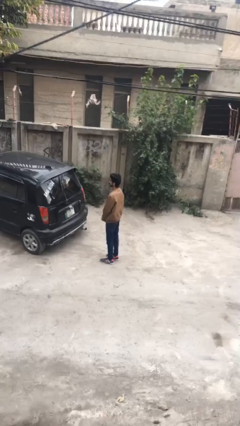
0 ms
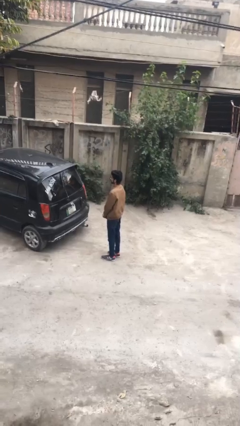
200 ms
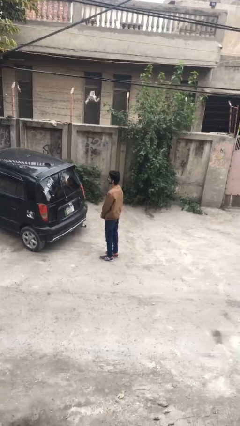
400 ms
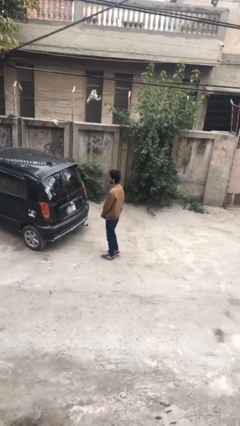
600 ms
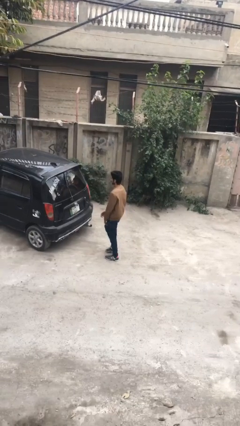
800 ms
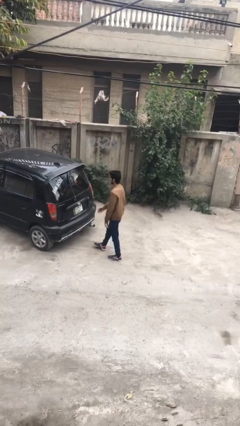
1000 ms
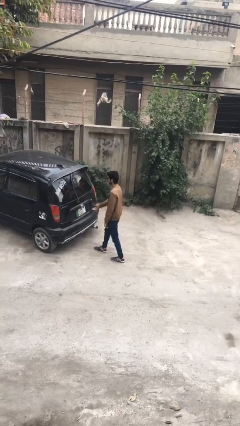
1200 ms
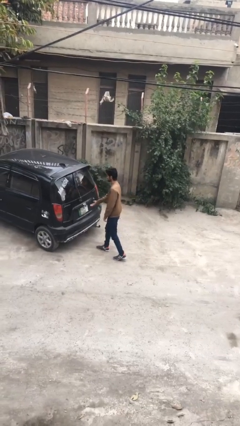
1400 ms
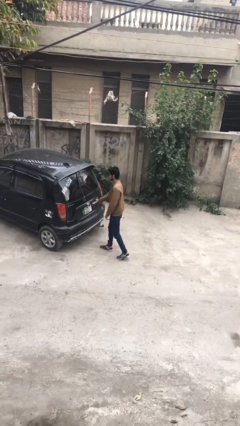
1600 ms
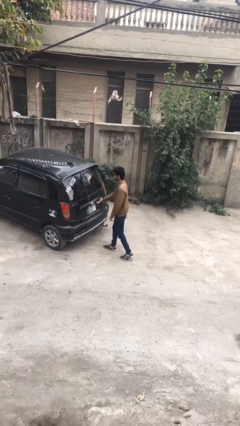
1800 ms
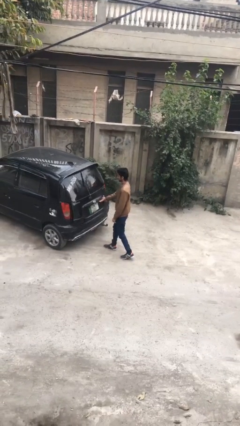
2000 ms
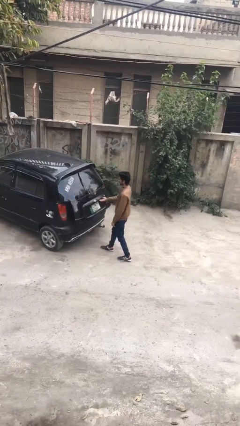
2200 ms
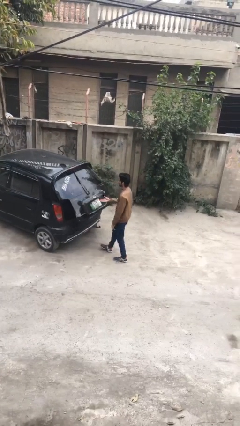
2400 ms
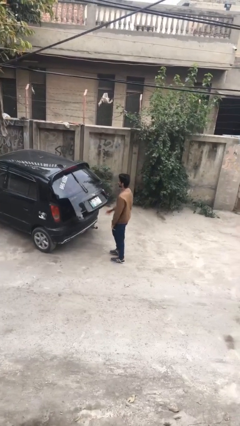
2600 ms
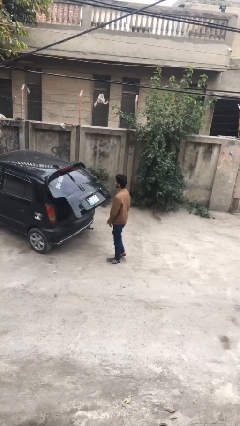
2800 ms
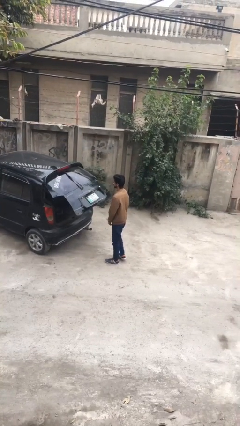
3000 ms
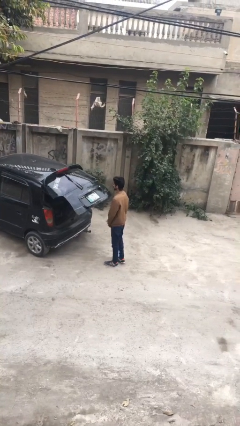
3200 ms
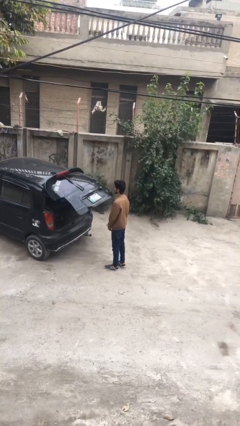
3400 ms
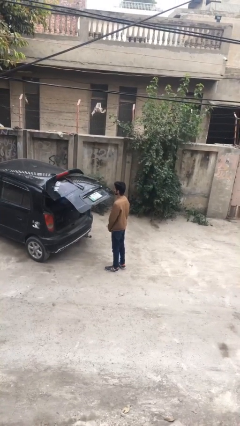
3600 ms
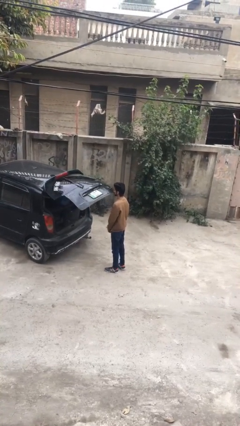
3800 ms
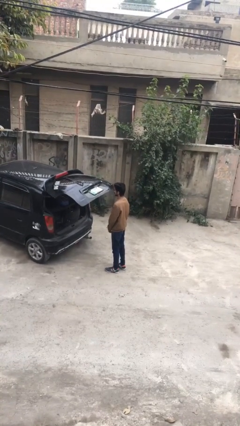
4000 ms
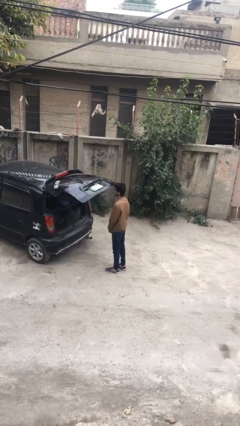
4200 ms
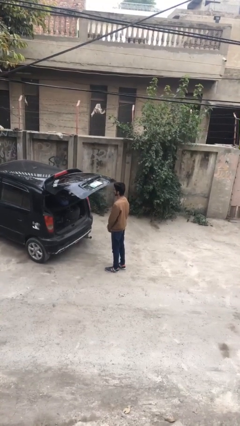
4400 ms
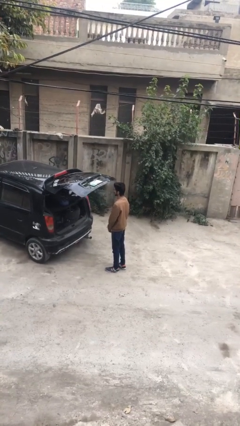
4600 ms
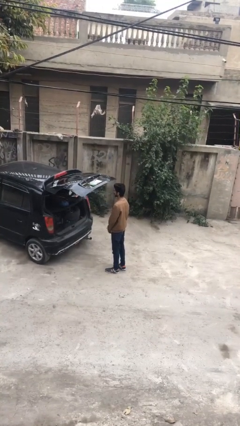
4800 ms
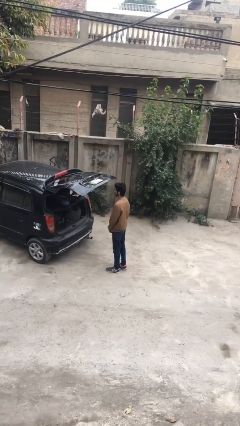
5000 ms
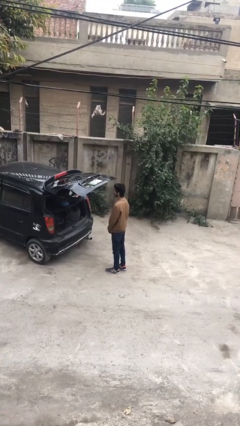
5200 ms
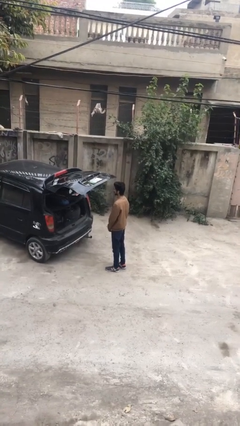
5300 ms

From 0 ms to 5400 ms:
person opens car trunk

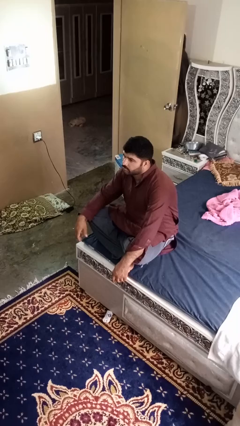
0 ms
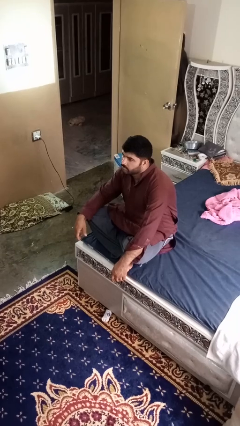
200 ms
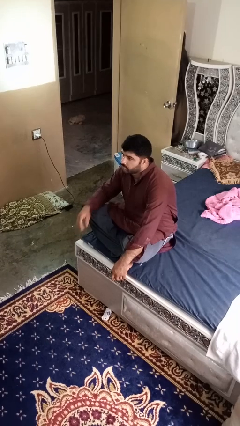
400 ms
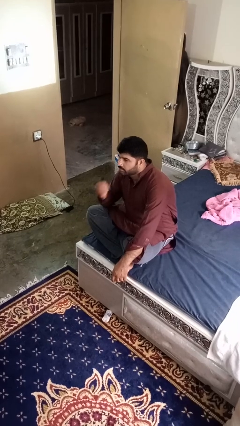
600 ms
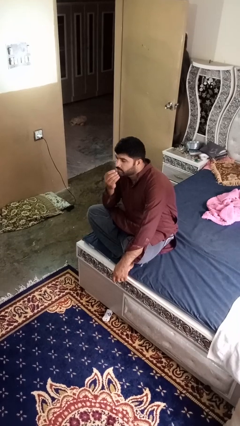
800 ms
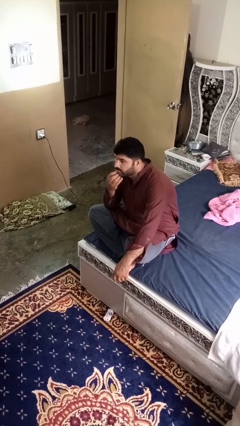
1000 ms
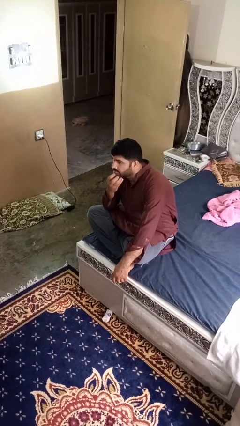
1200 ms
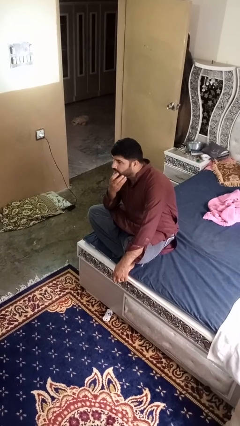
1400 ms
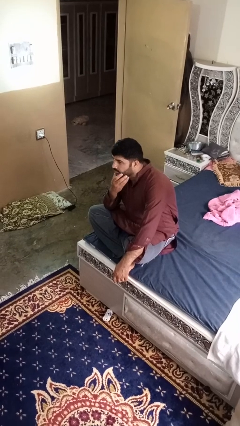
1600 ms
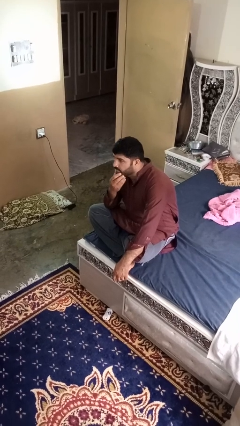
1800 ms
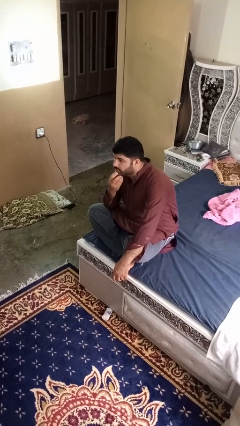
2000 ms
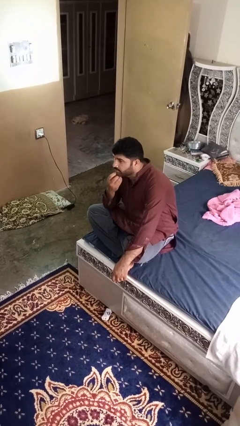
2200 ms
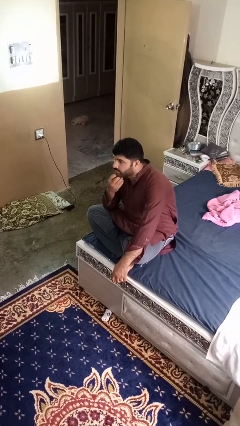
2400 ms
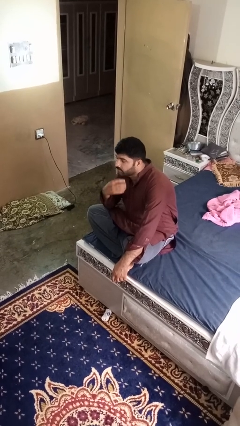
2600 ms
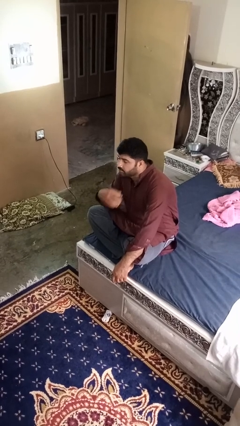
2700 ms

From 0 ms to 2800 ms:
person strokes chin

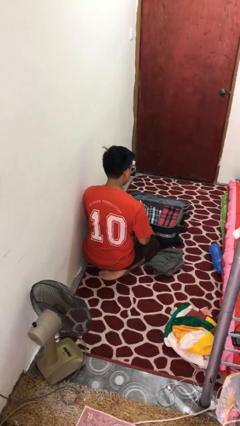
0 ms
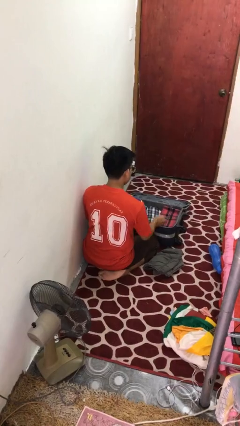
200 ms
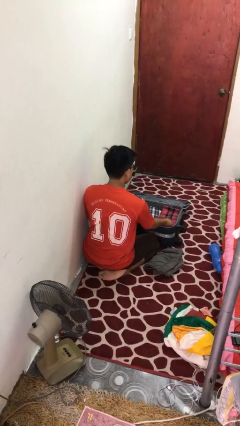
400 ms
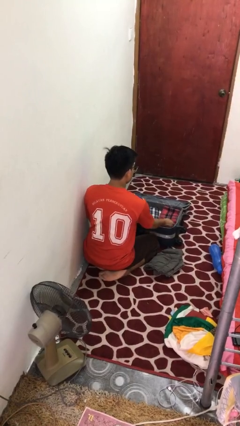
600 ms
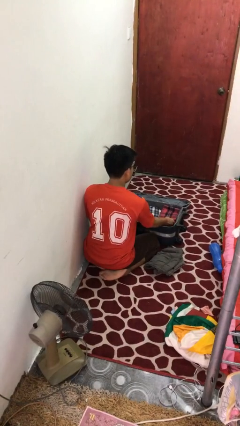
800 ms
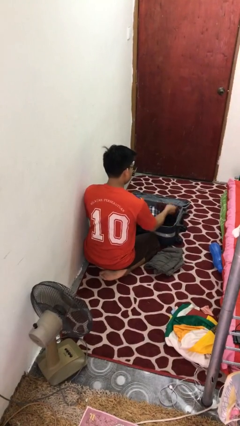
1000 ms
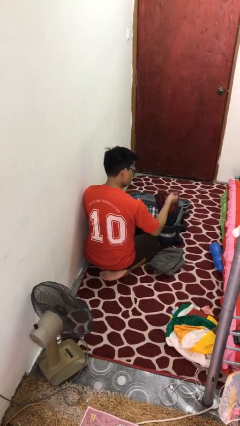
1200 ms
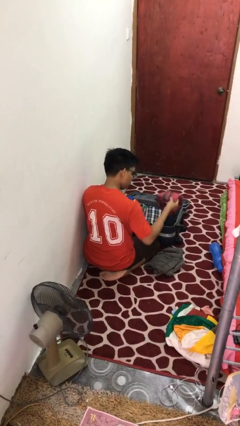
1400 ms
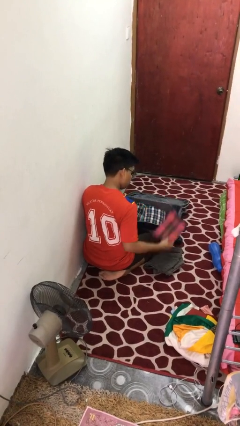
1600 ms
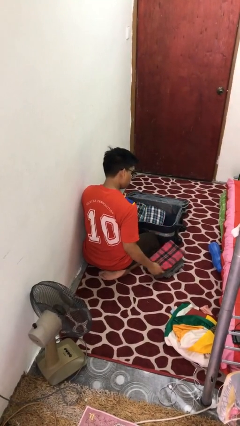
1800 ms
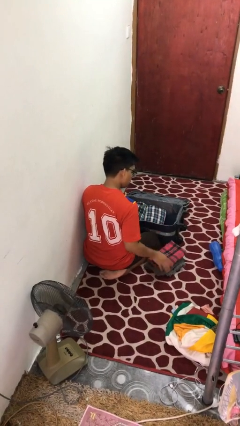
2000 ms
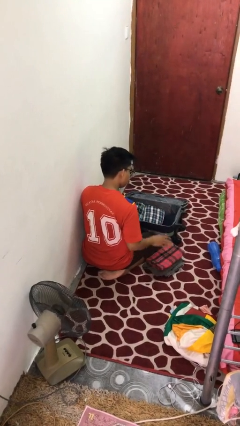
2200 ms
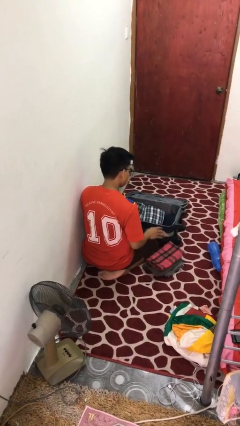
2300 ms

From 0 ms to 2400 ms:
person unloads clothes from suitcase

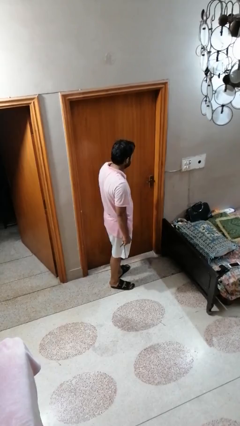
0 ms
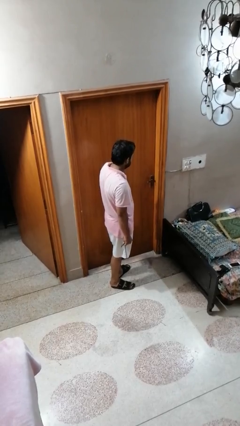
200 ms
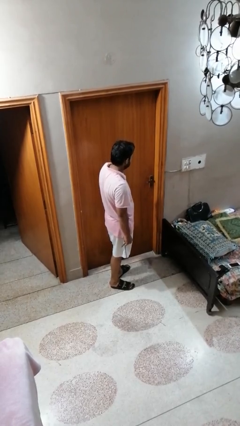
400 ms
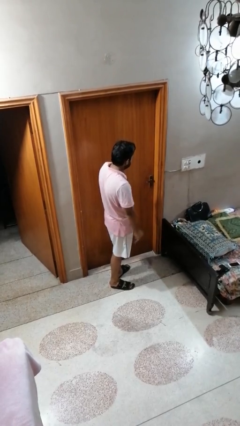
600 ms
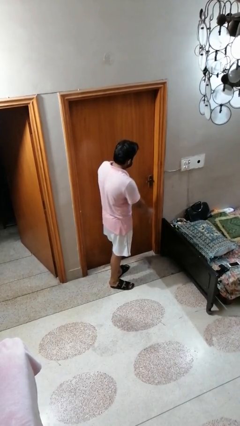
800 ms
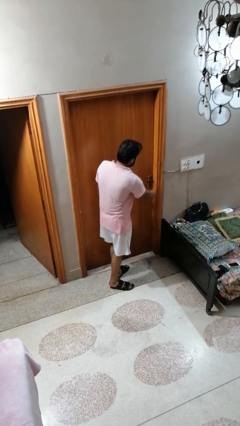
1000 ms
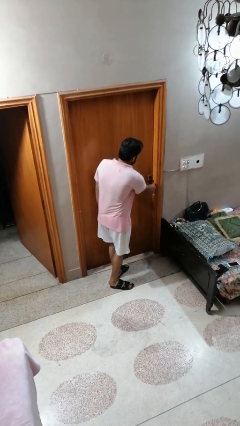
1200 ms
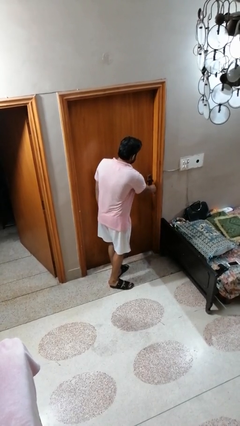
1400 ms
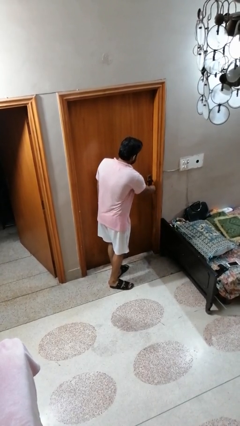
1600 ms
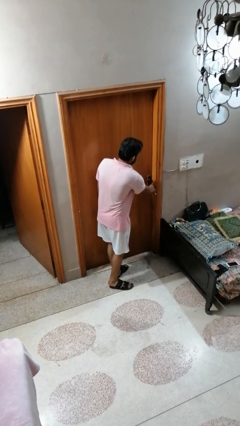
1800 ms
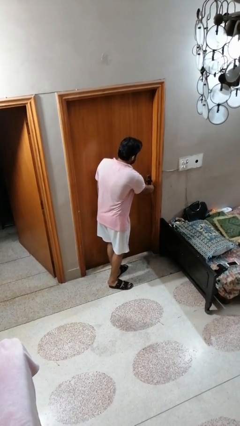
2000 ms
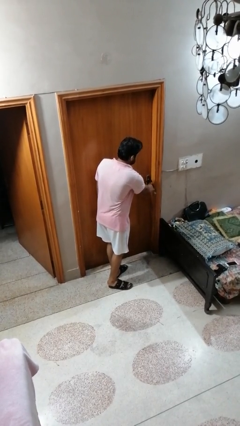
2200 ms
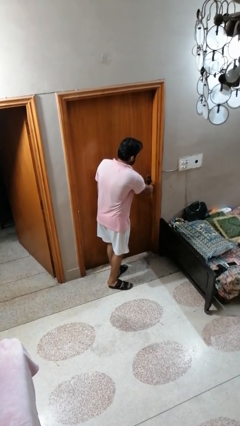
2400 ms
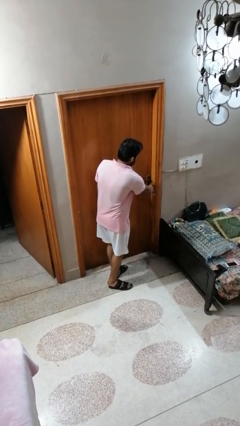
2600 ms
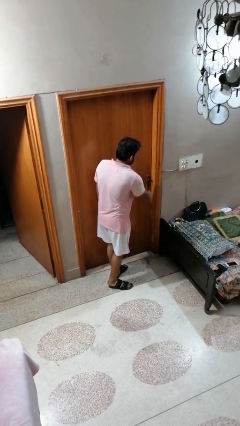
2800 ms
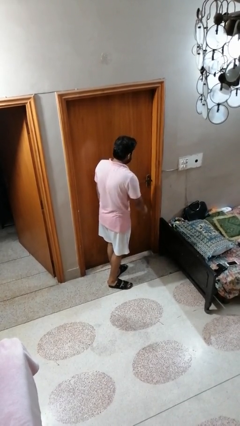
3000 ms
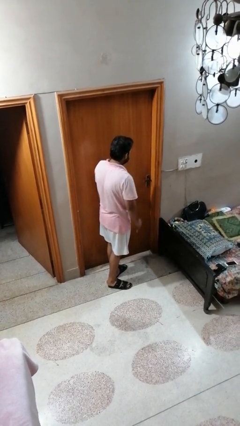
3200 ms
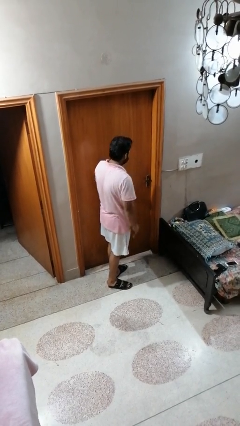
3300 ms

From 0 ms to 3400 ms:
person unlocks door with keys

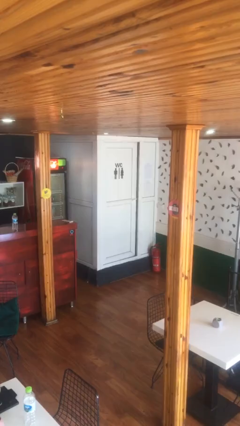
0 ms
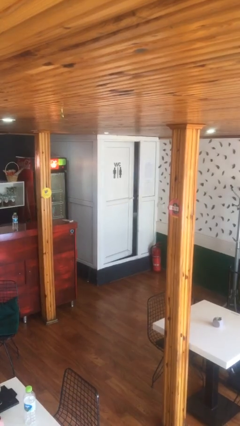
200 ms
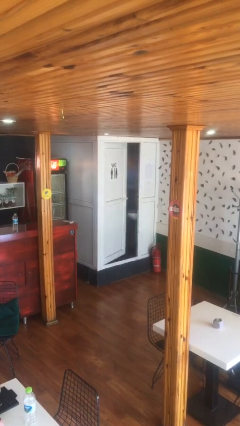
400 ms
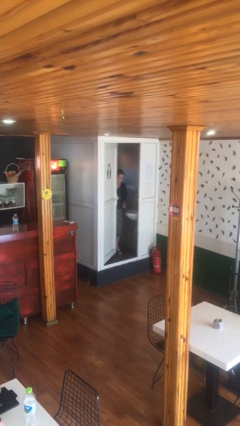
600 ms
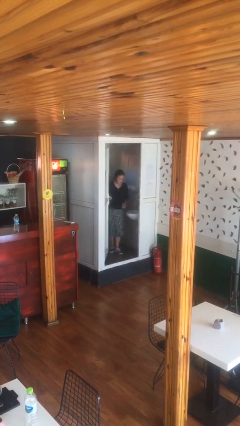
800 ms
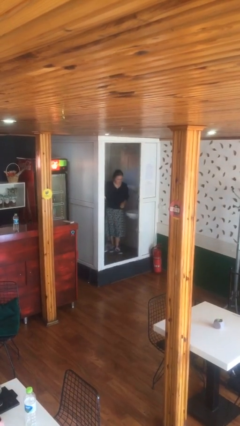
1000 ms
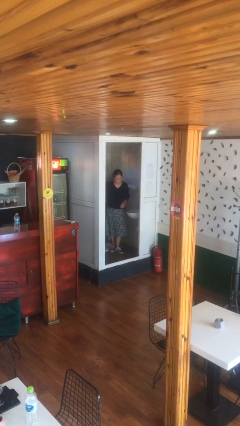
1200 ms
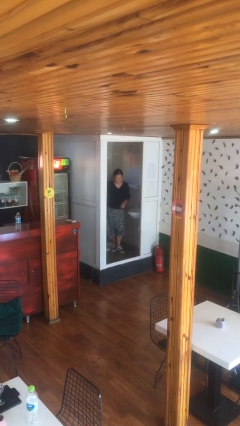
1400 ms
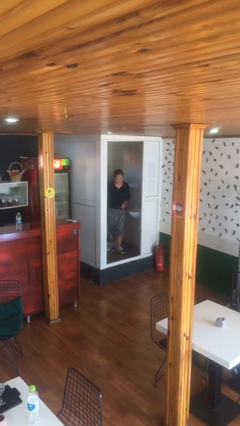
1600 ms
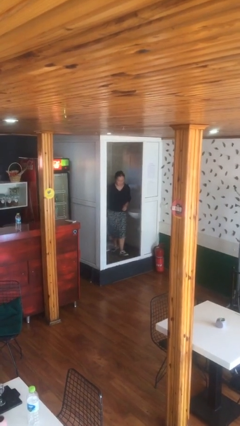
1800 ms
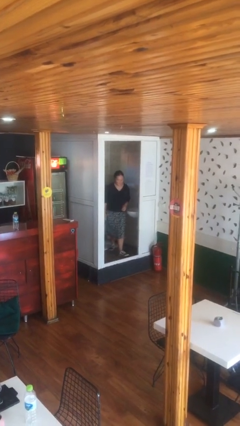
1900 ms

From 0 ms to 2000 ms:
person opens facility door

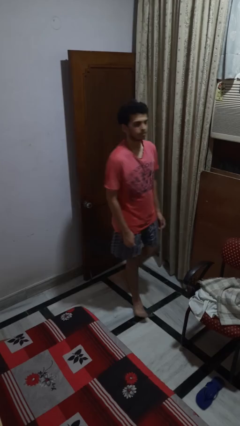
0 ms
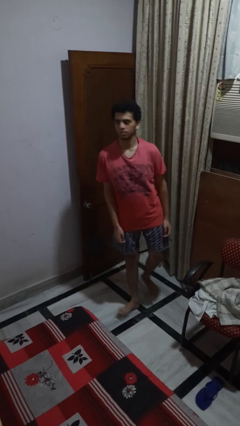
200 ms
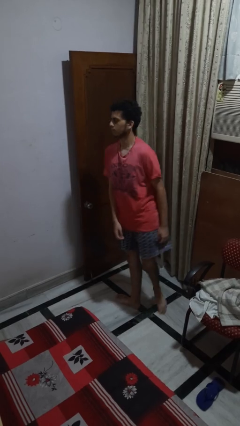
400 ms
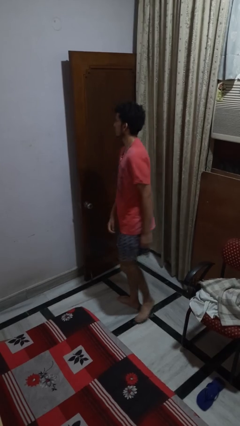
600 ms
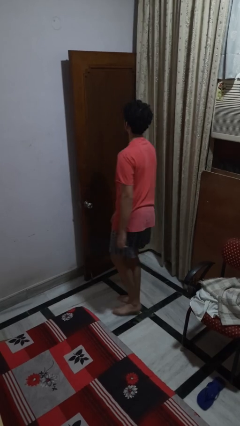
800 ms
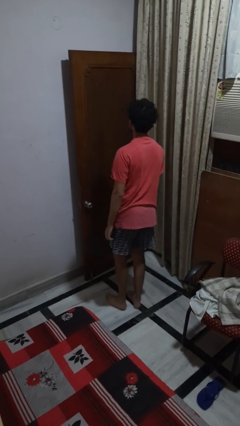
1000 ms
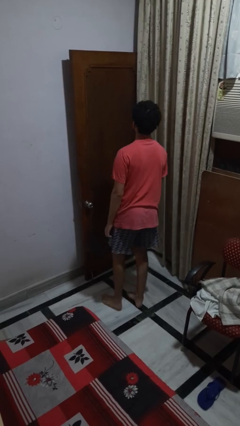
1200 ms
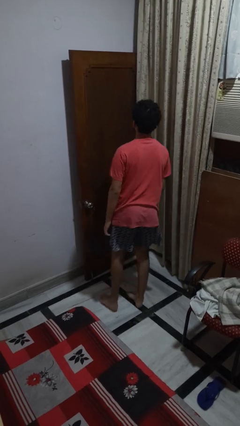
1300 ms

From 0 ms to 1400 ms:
person twirls
